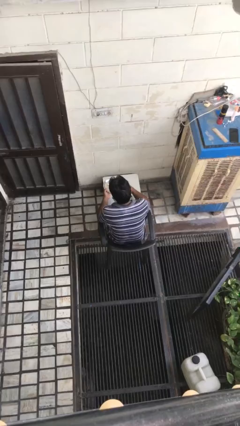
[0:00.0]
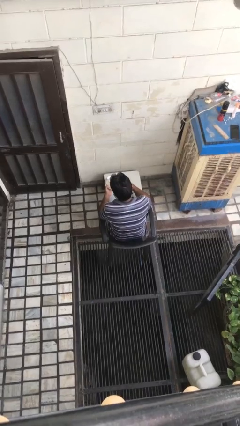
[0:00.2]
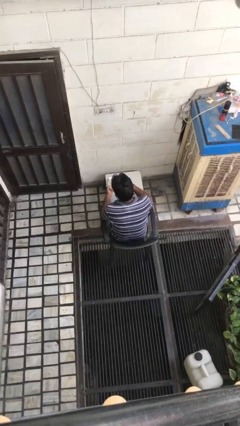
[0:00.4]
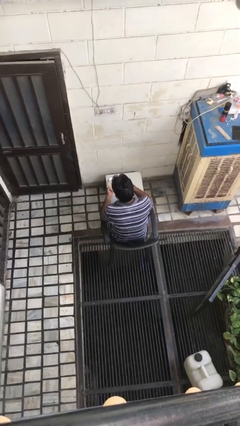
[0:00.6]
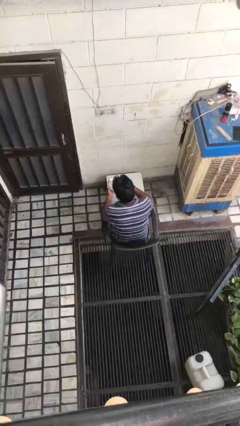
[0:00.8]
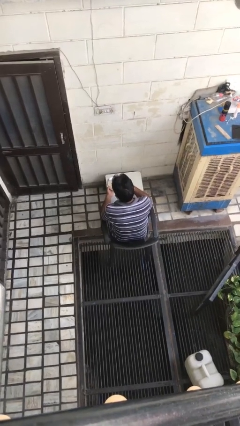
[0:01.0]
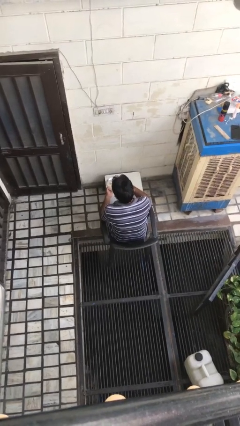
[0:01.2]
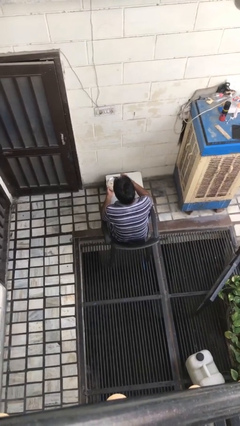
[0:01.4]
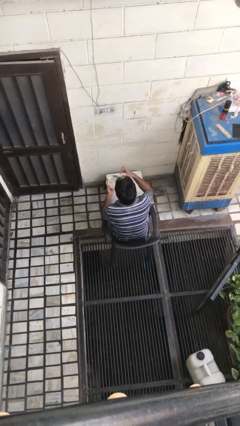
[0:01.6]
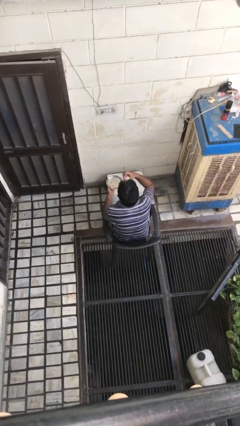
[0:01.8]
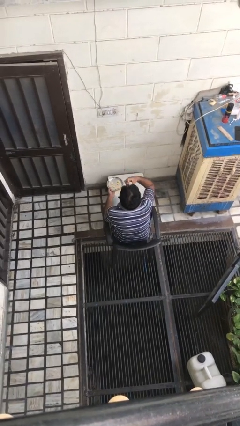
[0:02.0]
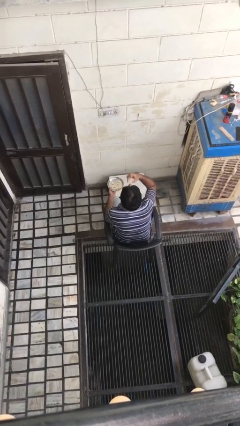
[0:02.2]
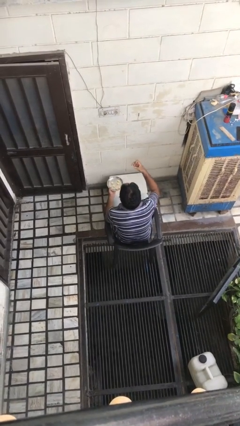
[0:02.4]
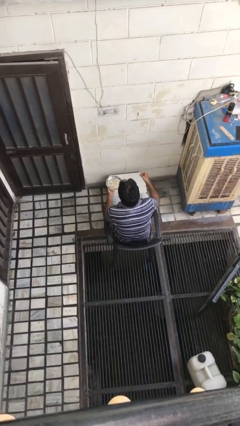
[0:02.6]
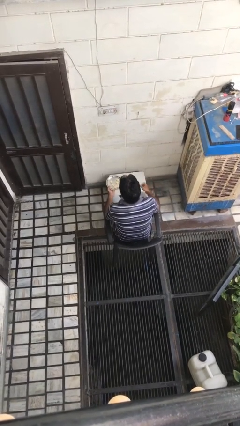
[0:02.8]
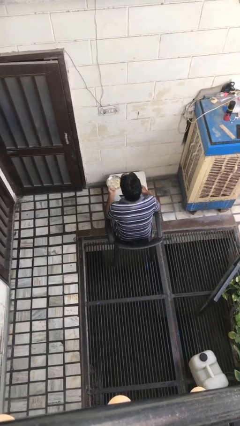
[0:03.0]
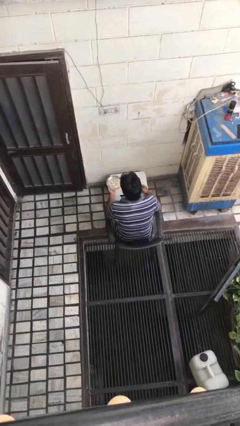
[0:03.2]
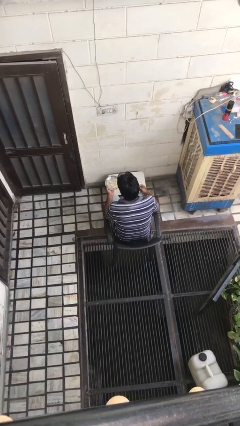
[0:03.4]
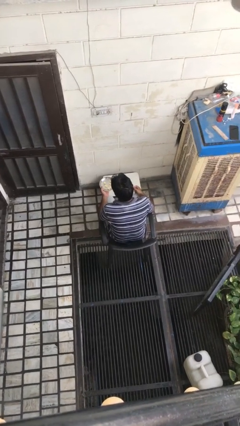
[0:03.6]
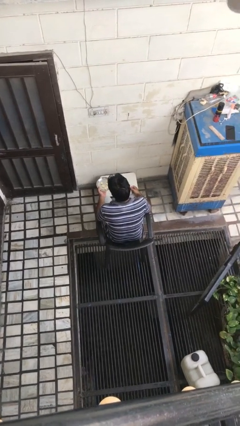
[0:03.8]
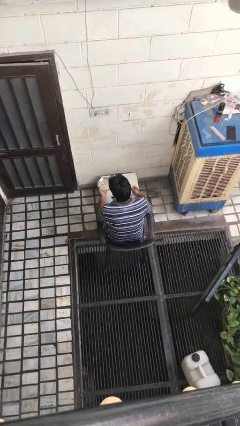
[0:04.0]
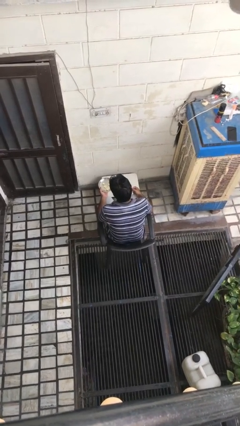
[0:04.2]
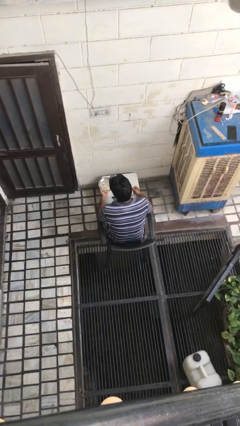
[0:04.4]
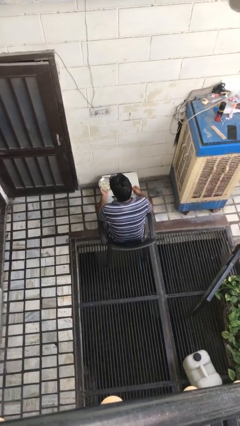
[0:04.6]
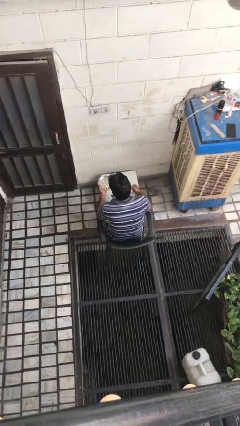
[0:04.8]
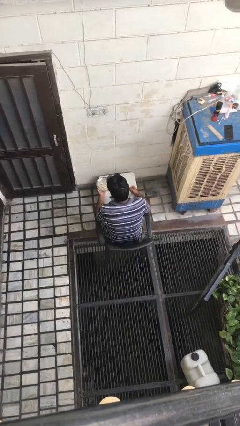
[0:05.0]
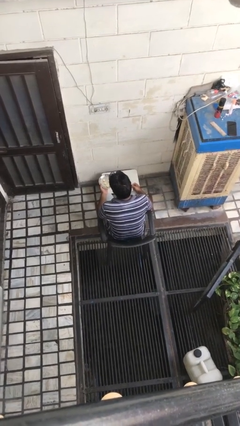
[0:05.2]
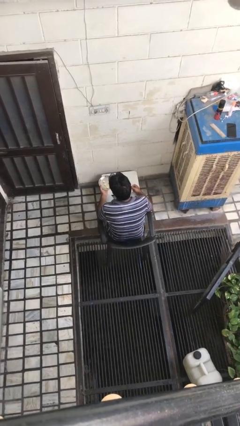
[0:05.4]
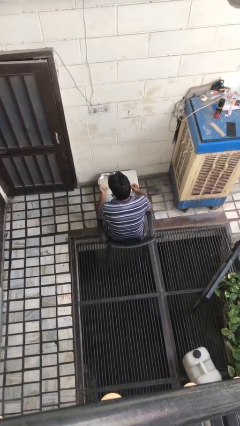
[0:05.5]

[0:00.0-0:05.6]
person eats with hands

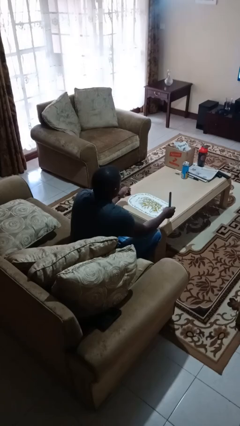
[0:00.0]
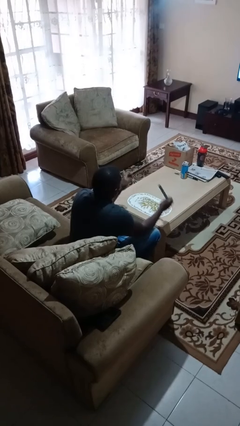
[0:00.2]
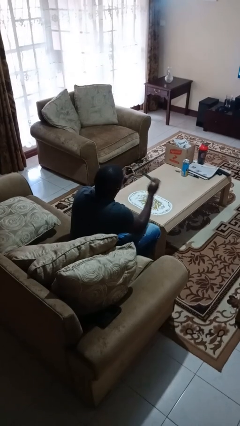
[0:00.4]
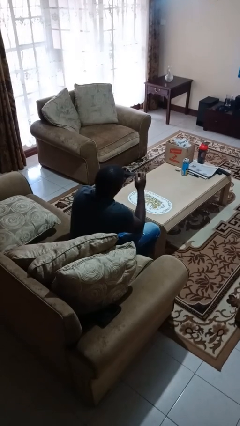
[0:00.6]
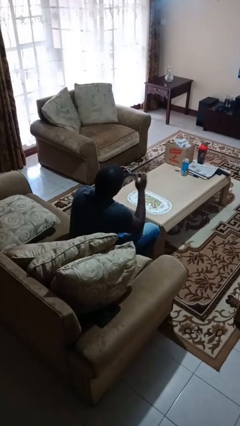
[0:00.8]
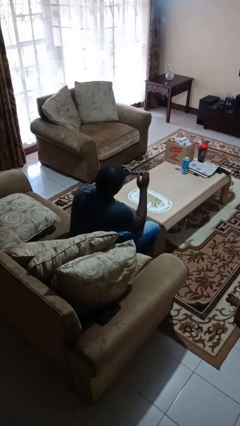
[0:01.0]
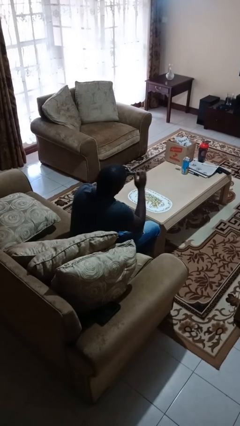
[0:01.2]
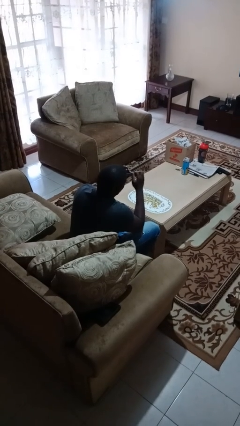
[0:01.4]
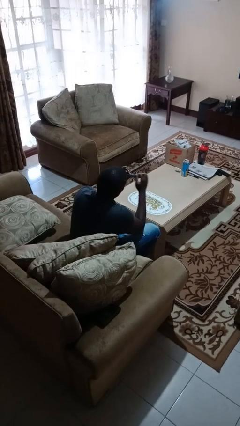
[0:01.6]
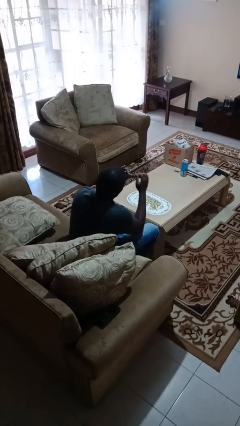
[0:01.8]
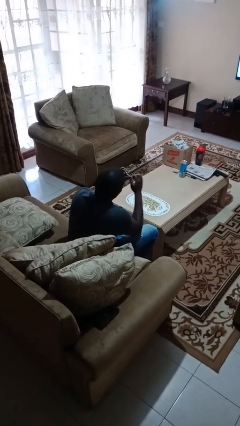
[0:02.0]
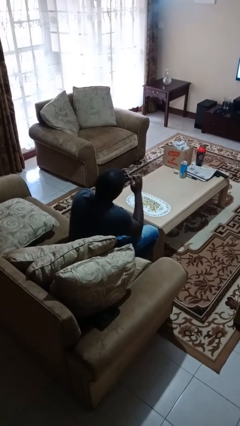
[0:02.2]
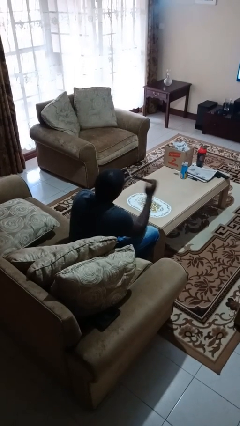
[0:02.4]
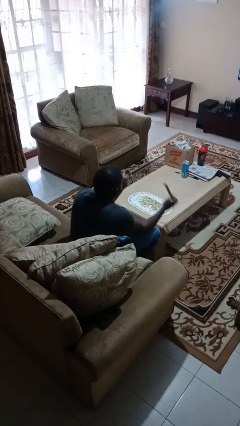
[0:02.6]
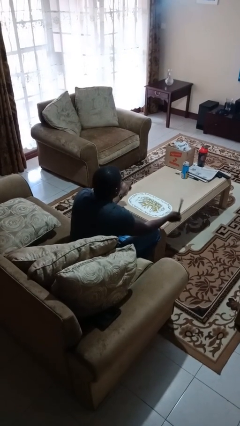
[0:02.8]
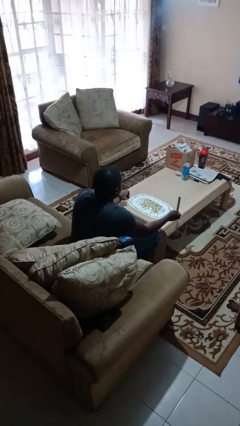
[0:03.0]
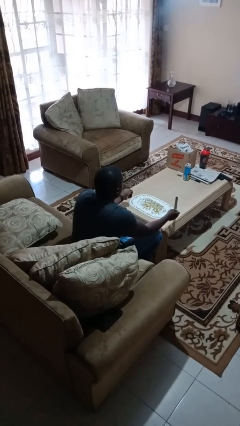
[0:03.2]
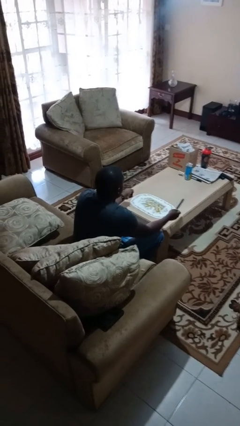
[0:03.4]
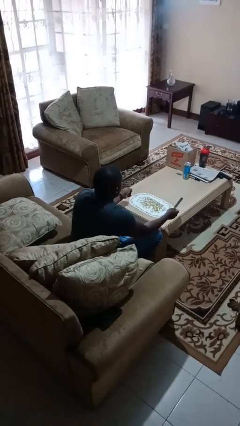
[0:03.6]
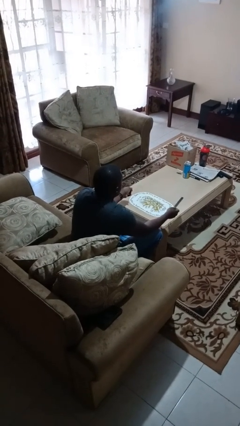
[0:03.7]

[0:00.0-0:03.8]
person files fingernails

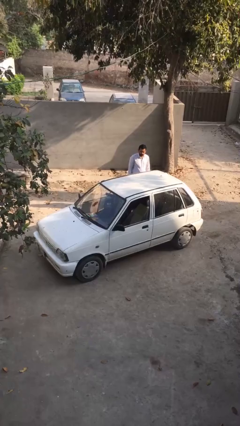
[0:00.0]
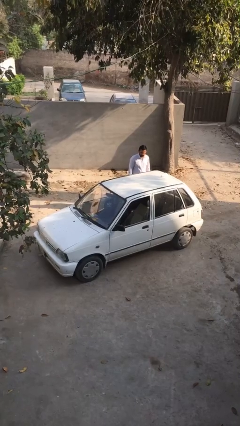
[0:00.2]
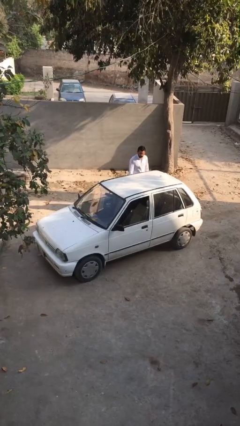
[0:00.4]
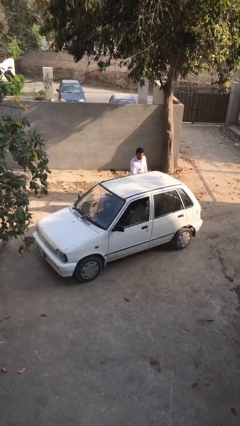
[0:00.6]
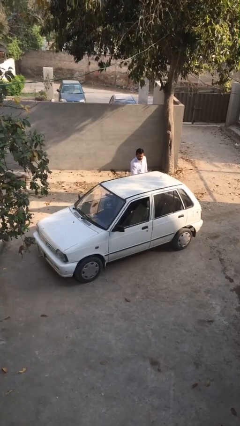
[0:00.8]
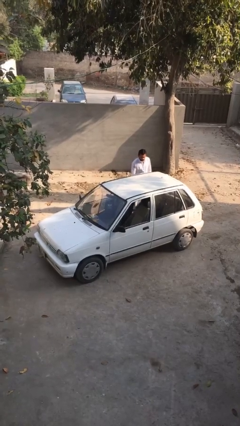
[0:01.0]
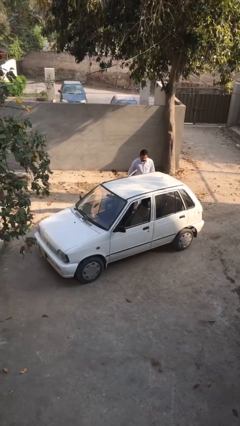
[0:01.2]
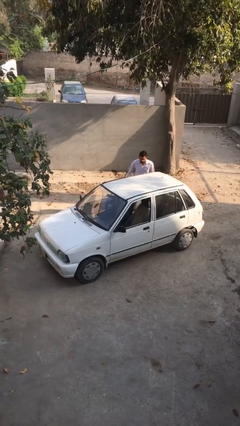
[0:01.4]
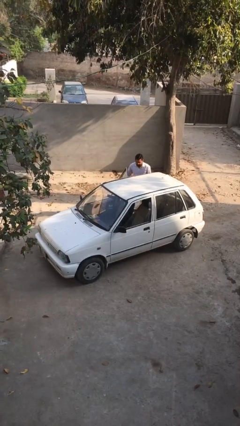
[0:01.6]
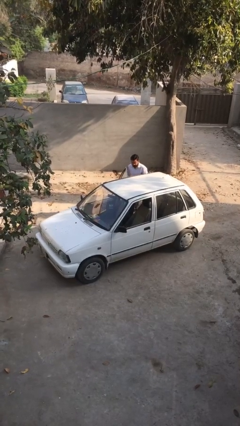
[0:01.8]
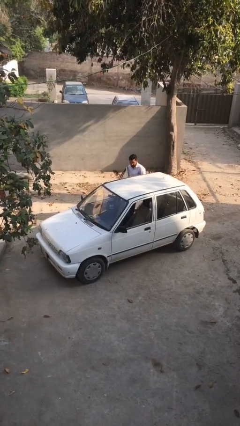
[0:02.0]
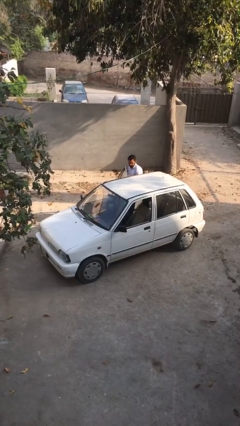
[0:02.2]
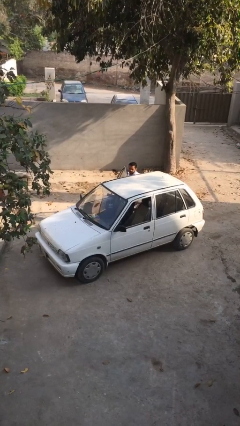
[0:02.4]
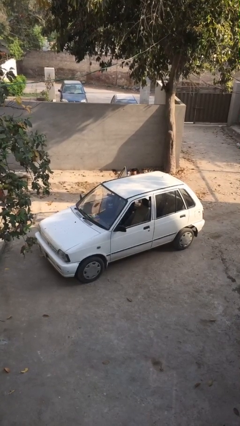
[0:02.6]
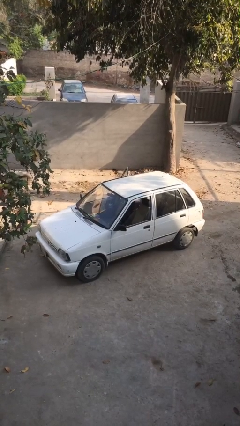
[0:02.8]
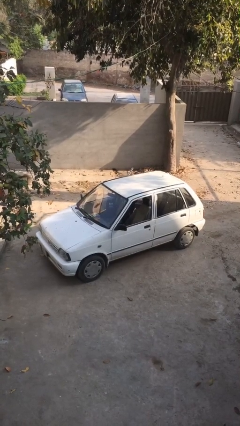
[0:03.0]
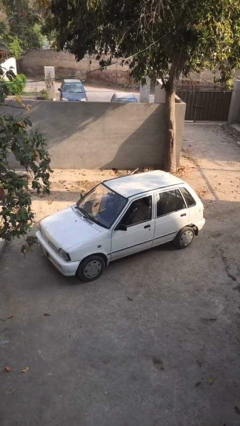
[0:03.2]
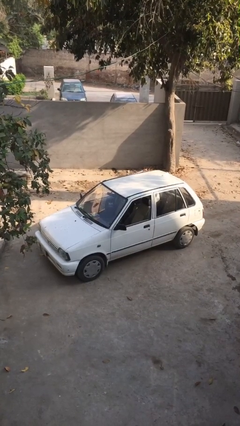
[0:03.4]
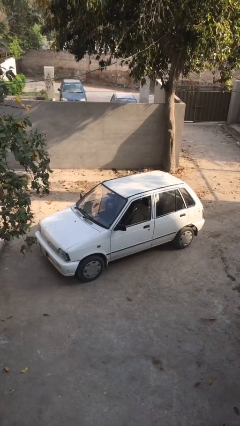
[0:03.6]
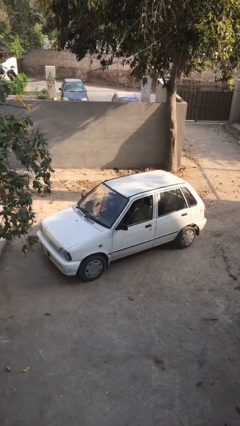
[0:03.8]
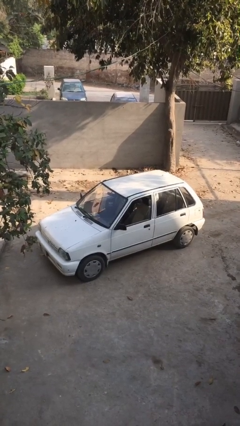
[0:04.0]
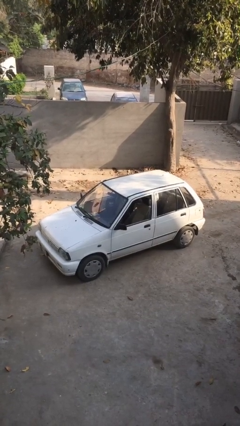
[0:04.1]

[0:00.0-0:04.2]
car picks up person

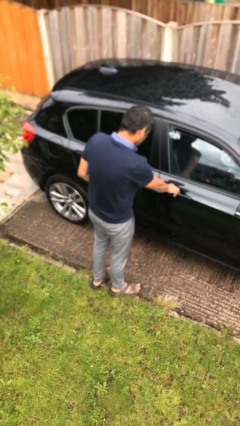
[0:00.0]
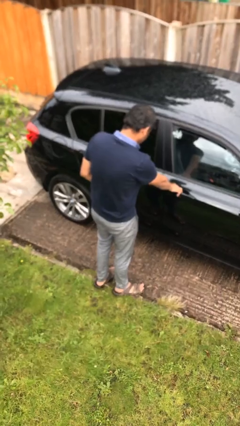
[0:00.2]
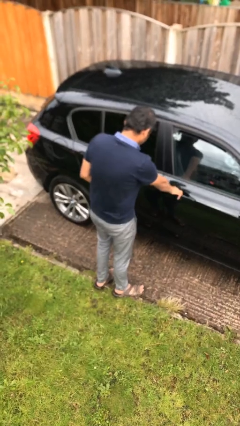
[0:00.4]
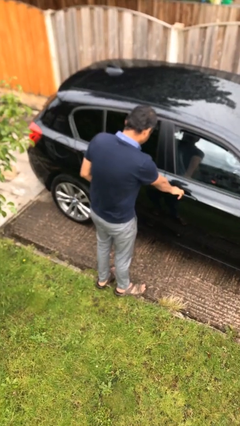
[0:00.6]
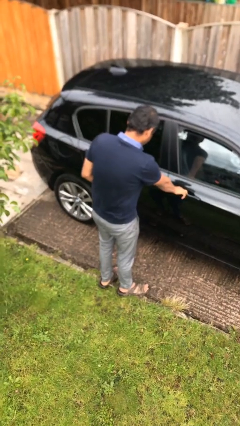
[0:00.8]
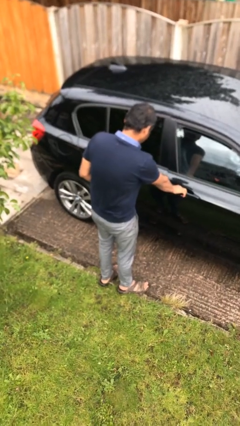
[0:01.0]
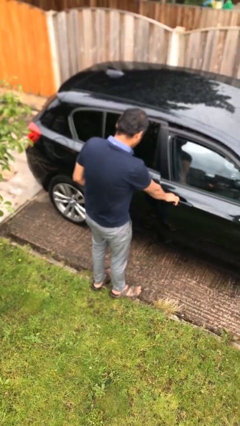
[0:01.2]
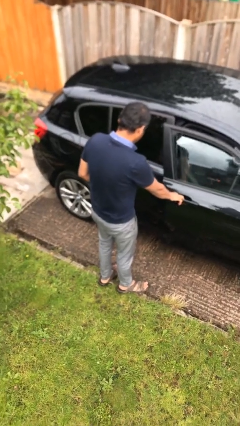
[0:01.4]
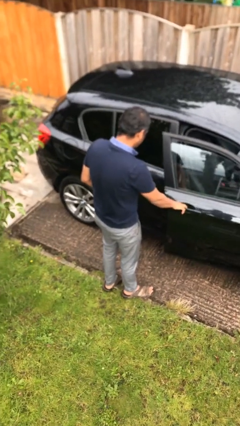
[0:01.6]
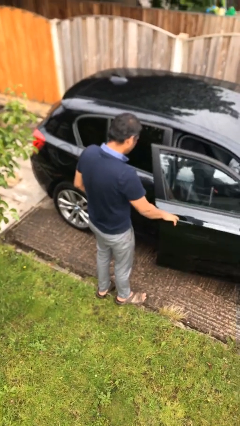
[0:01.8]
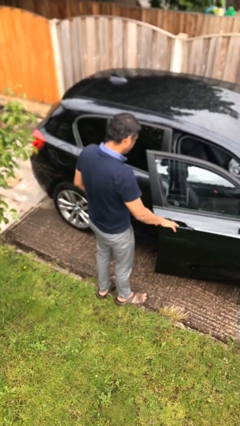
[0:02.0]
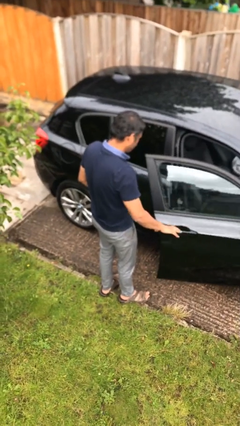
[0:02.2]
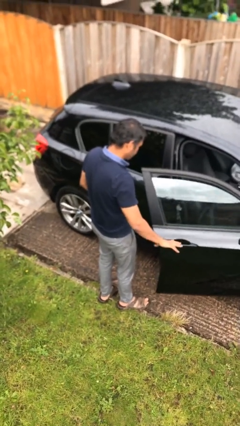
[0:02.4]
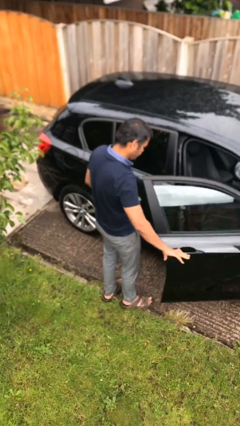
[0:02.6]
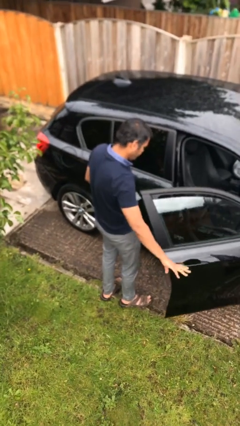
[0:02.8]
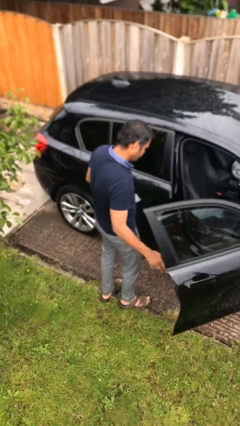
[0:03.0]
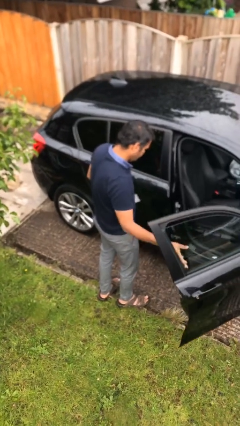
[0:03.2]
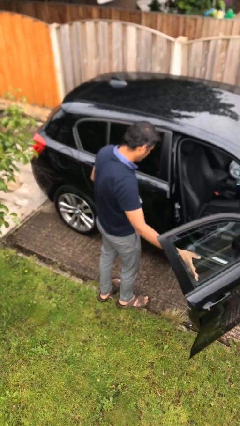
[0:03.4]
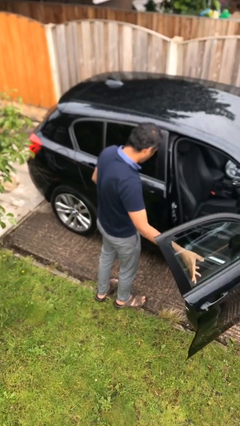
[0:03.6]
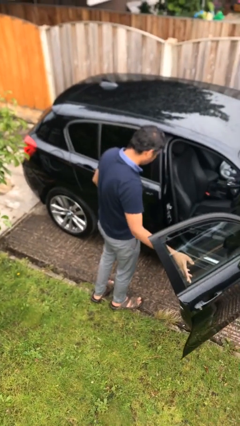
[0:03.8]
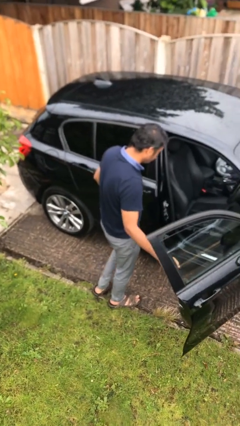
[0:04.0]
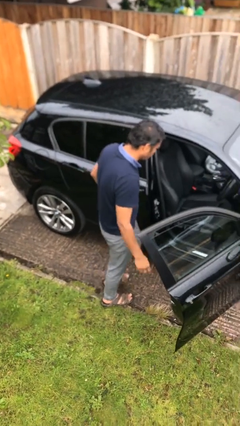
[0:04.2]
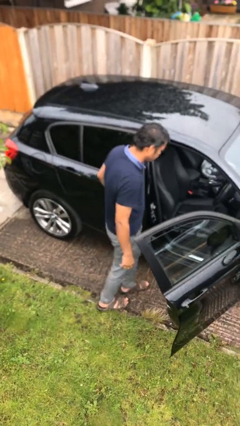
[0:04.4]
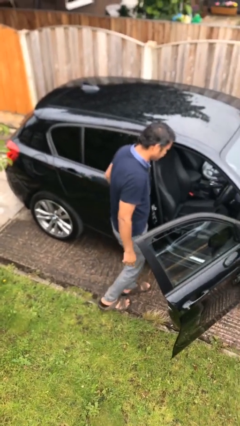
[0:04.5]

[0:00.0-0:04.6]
person opens car door
